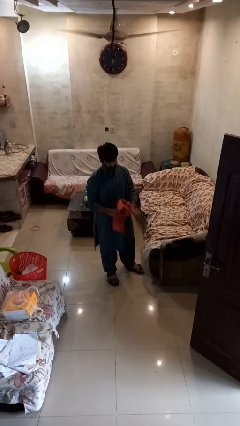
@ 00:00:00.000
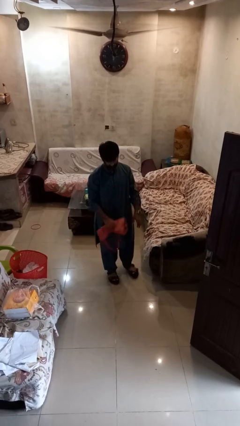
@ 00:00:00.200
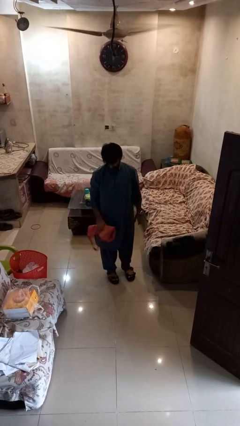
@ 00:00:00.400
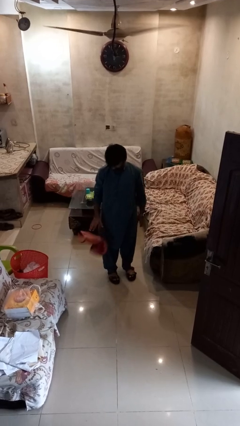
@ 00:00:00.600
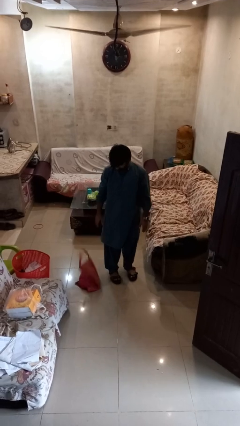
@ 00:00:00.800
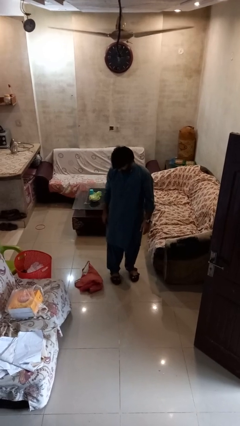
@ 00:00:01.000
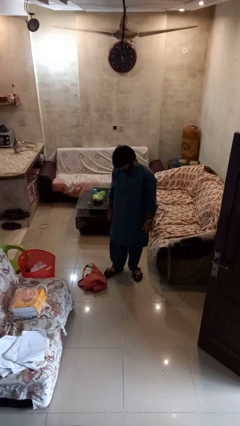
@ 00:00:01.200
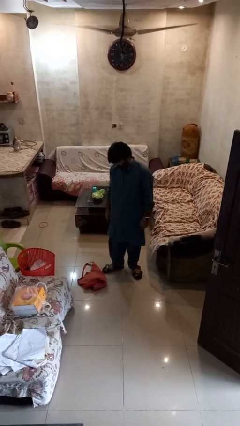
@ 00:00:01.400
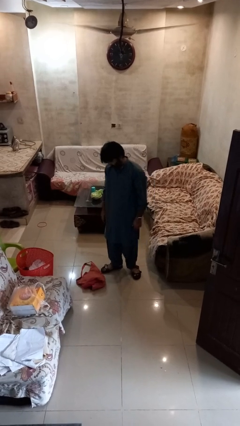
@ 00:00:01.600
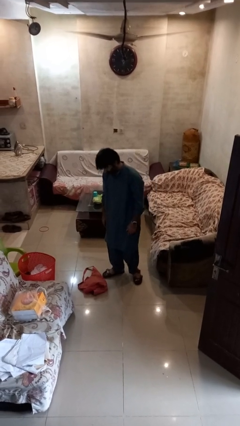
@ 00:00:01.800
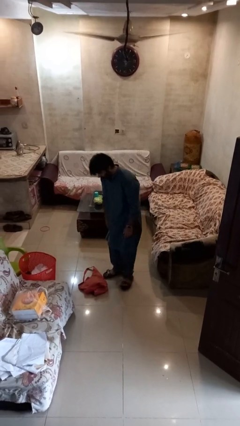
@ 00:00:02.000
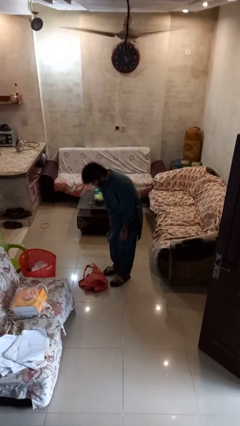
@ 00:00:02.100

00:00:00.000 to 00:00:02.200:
person drops object

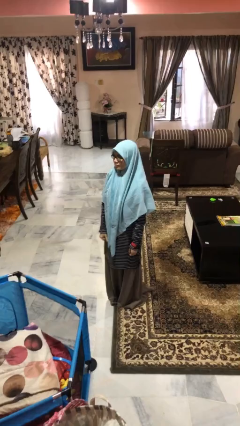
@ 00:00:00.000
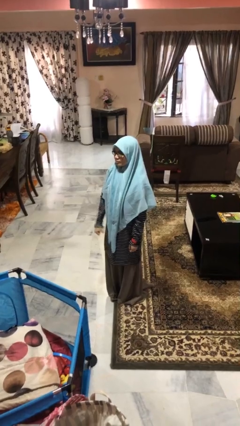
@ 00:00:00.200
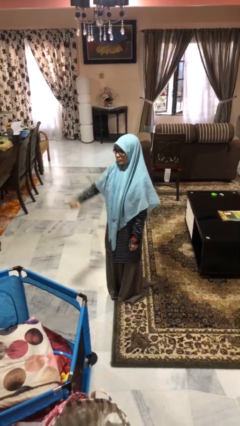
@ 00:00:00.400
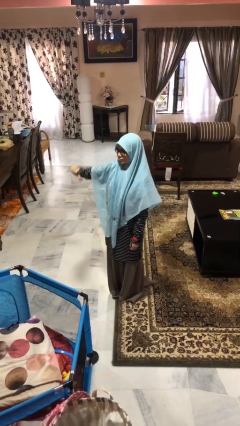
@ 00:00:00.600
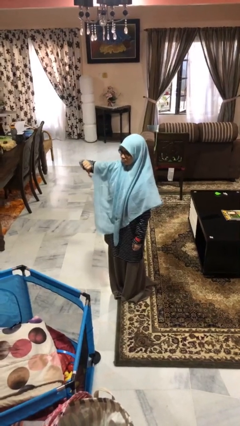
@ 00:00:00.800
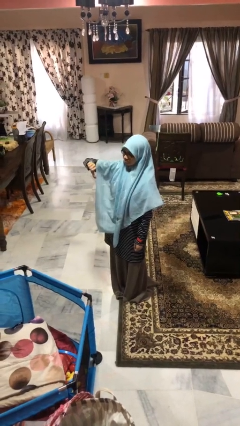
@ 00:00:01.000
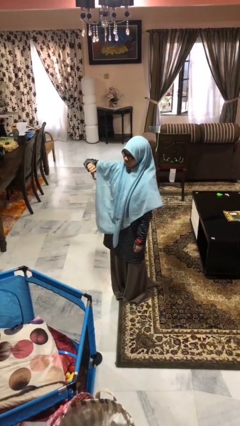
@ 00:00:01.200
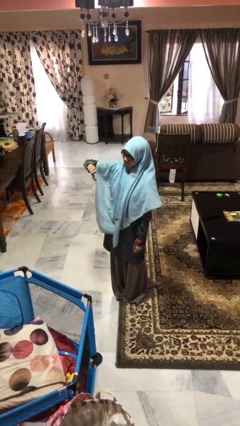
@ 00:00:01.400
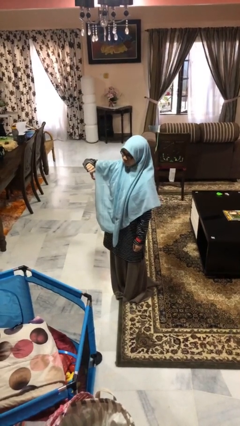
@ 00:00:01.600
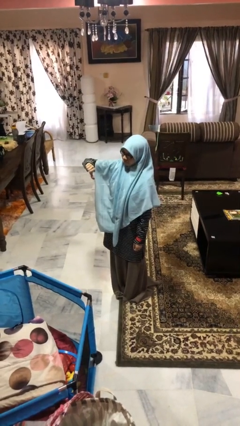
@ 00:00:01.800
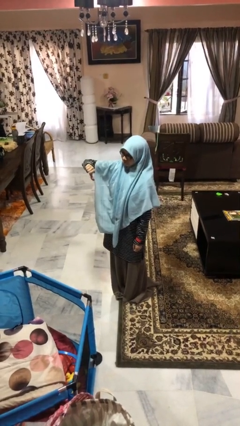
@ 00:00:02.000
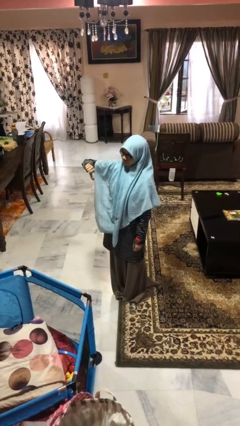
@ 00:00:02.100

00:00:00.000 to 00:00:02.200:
person gestures thumbs down

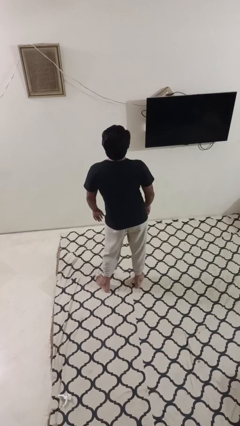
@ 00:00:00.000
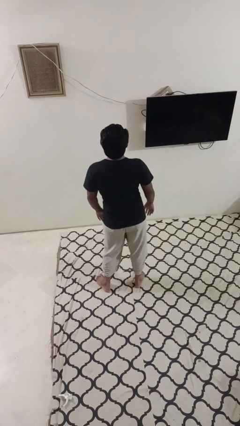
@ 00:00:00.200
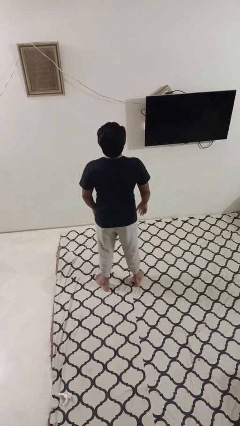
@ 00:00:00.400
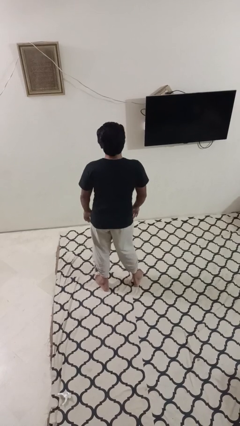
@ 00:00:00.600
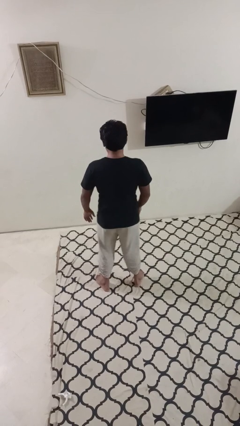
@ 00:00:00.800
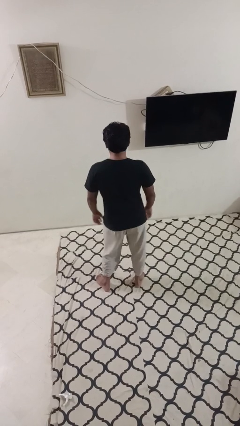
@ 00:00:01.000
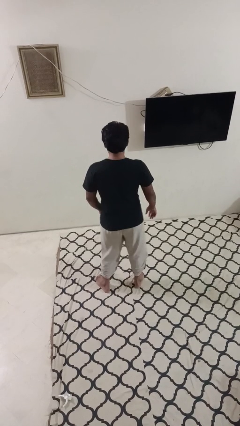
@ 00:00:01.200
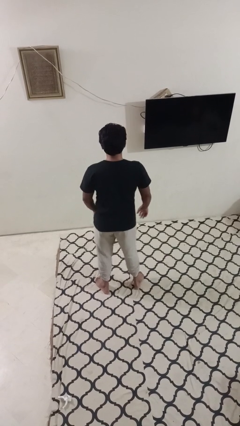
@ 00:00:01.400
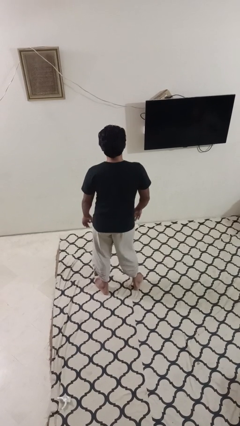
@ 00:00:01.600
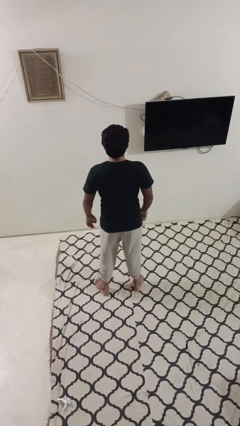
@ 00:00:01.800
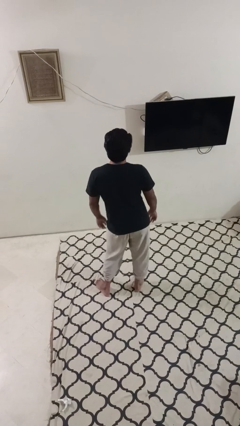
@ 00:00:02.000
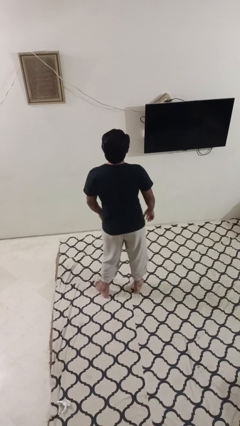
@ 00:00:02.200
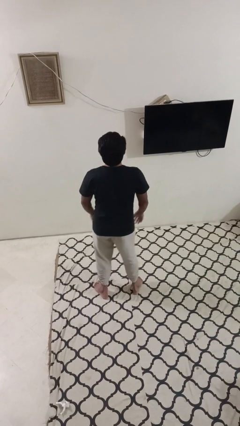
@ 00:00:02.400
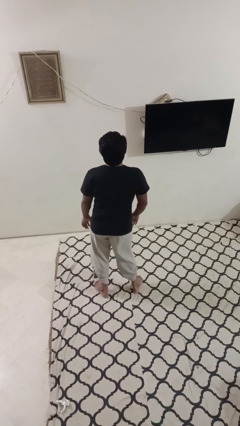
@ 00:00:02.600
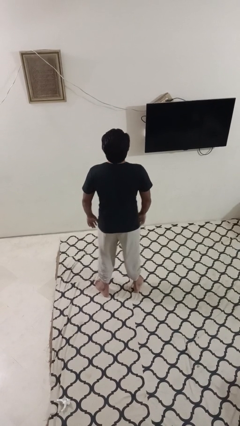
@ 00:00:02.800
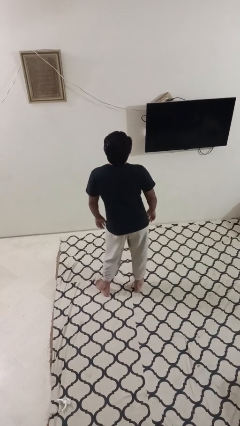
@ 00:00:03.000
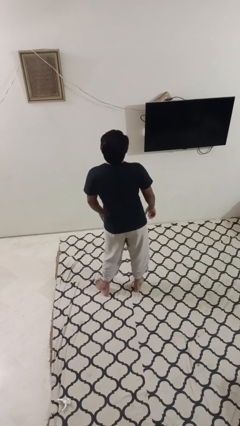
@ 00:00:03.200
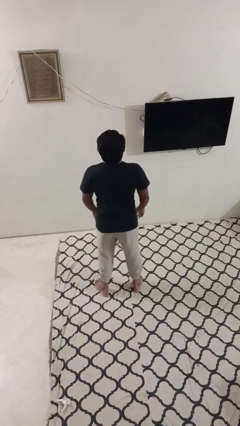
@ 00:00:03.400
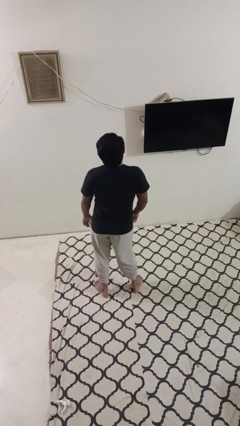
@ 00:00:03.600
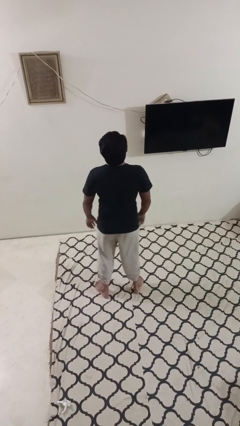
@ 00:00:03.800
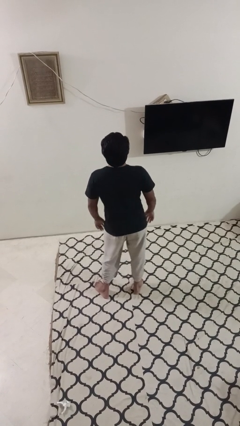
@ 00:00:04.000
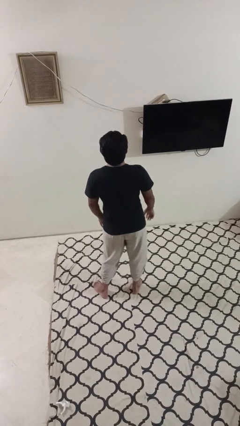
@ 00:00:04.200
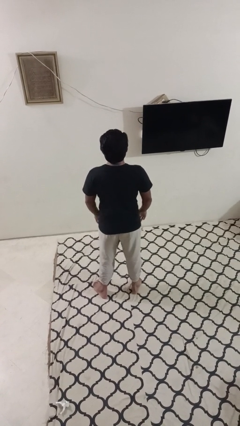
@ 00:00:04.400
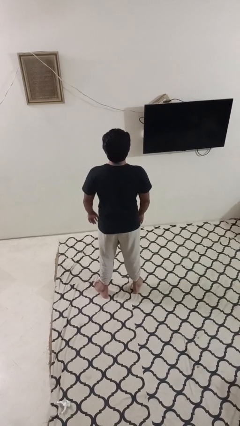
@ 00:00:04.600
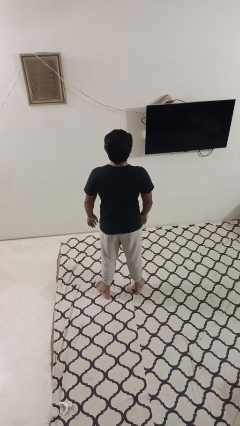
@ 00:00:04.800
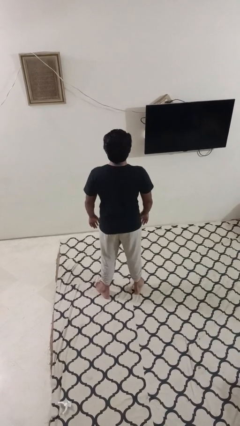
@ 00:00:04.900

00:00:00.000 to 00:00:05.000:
person wiggles hips

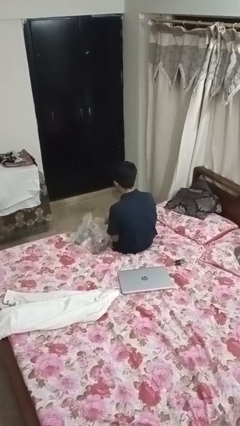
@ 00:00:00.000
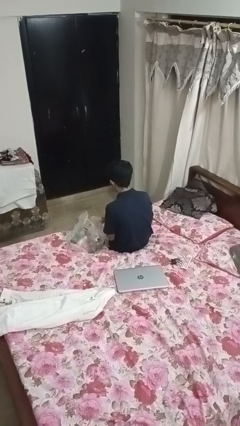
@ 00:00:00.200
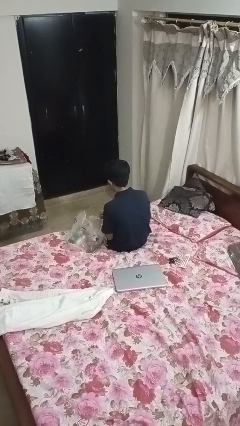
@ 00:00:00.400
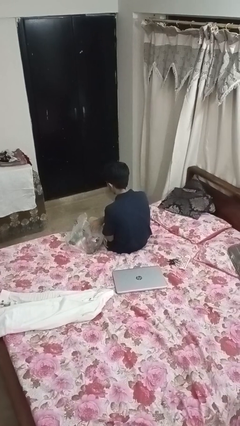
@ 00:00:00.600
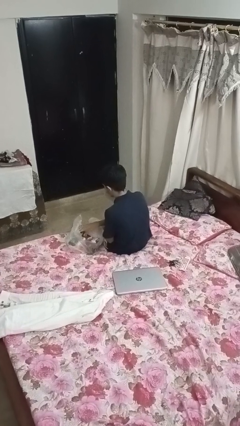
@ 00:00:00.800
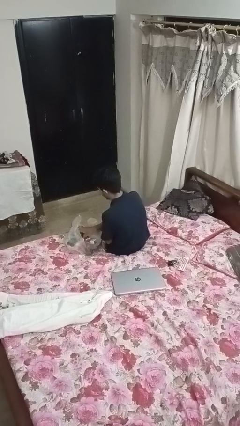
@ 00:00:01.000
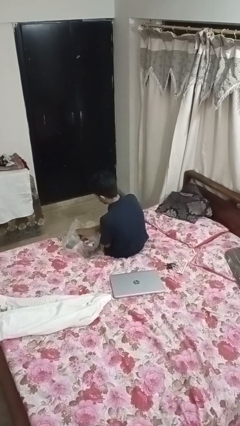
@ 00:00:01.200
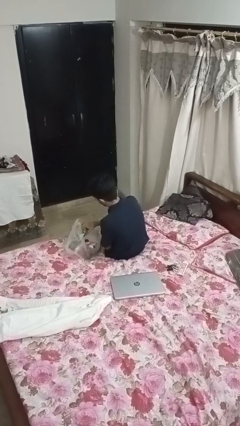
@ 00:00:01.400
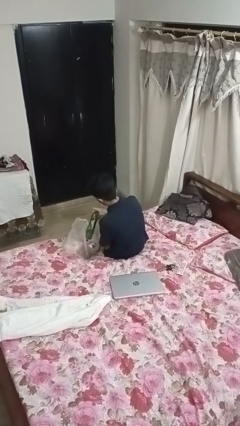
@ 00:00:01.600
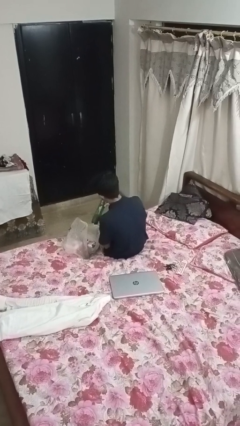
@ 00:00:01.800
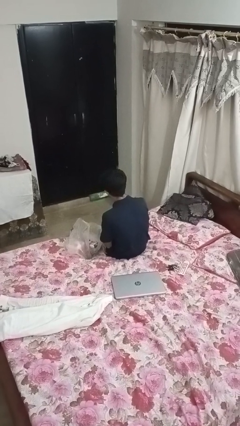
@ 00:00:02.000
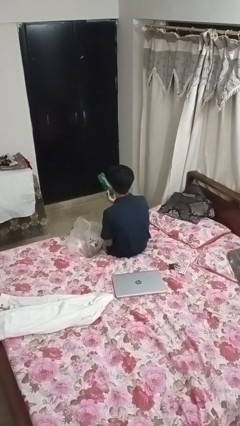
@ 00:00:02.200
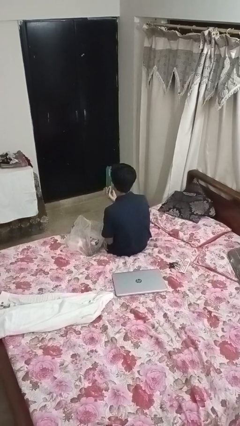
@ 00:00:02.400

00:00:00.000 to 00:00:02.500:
person takes object from bag

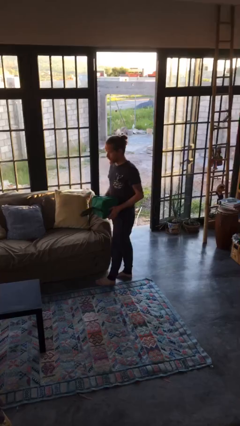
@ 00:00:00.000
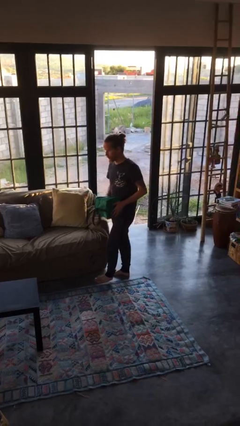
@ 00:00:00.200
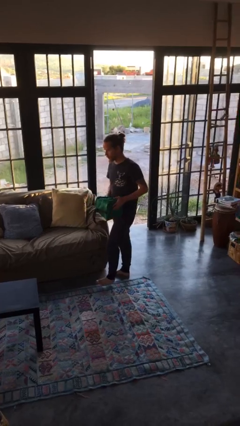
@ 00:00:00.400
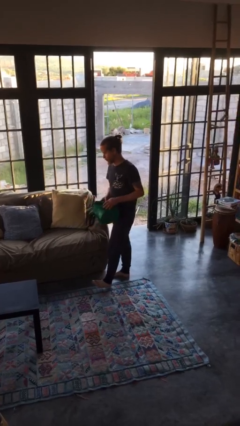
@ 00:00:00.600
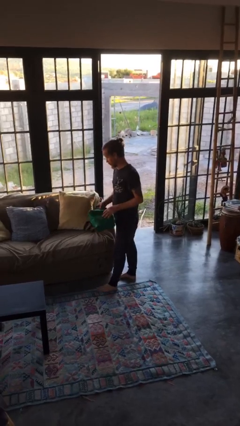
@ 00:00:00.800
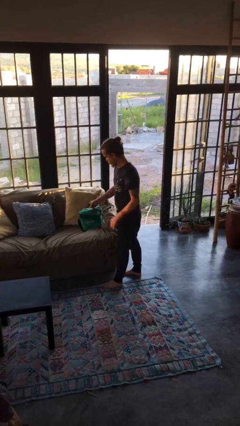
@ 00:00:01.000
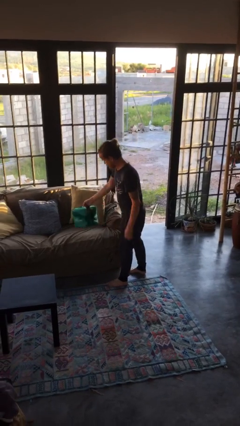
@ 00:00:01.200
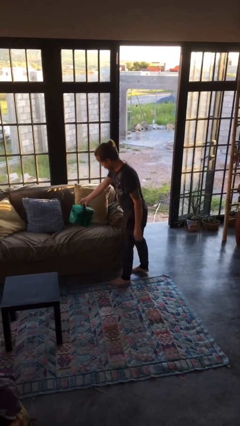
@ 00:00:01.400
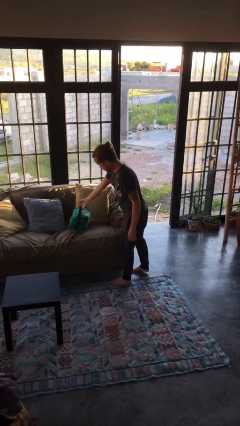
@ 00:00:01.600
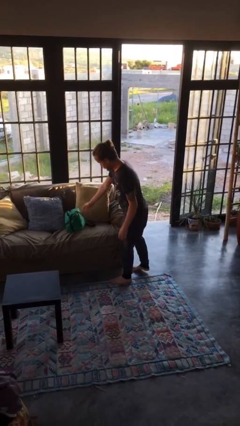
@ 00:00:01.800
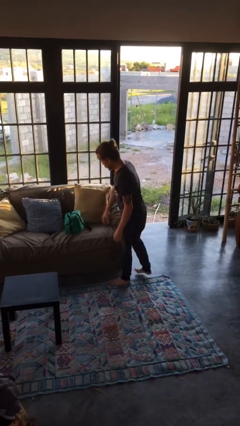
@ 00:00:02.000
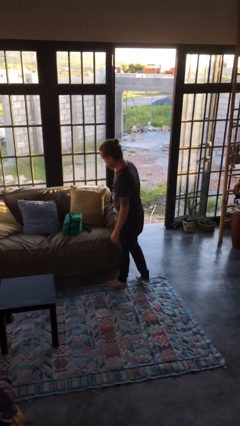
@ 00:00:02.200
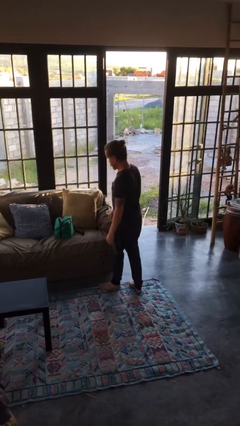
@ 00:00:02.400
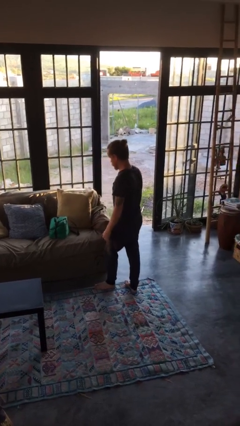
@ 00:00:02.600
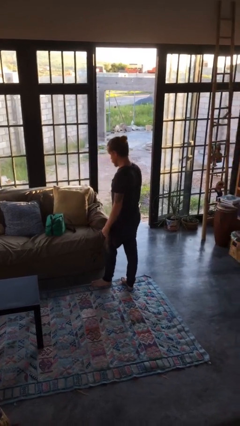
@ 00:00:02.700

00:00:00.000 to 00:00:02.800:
person puts down object on couch

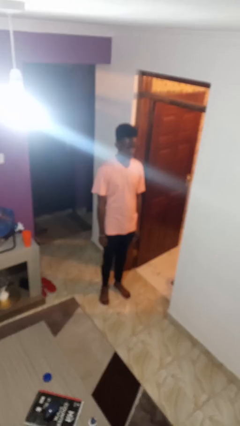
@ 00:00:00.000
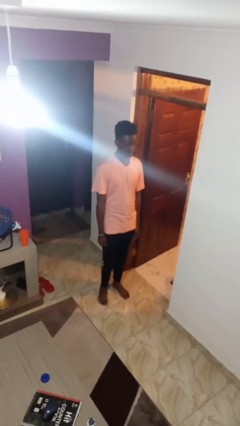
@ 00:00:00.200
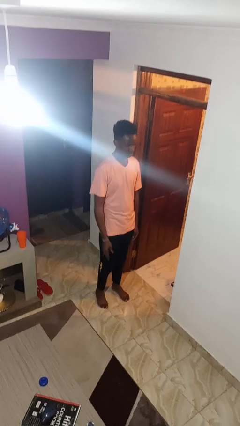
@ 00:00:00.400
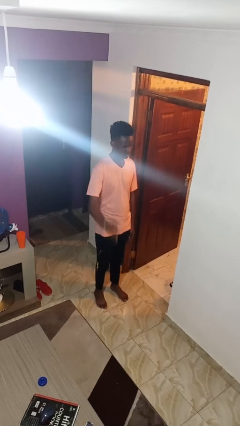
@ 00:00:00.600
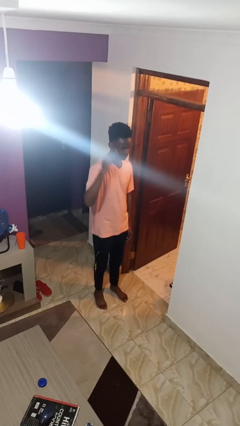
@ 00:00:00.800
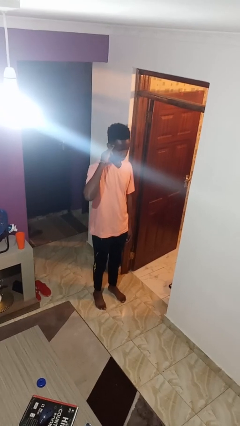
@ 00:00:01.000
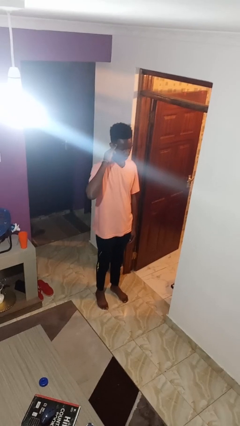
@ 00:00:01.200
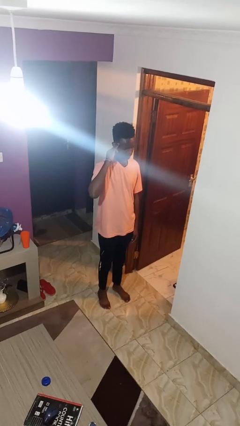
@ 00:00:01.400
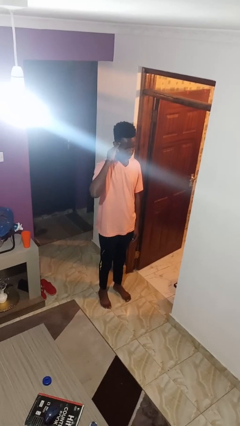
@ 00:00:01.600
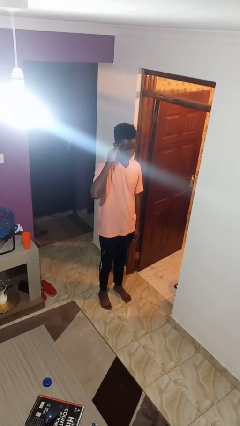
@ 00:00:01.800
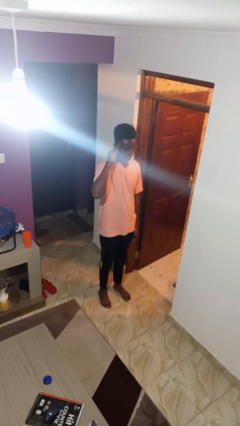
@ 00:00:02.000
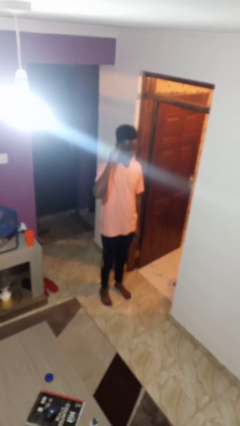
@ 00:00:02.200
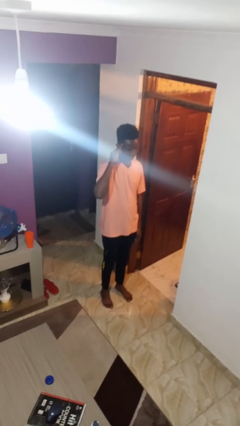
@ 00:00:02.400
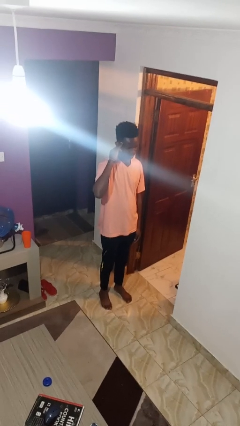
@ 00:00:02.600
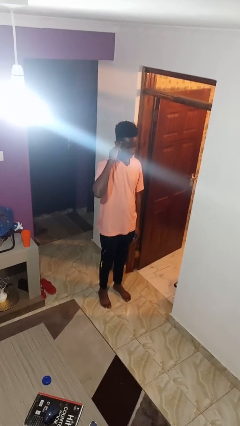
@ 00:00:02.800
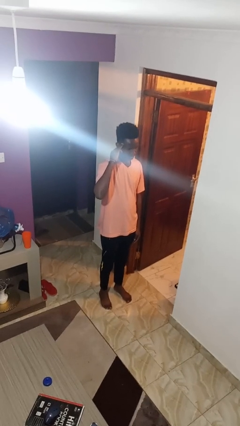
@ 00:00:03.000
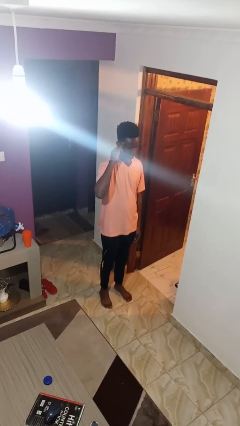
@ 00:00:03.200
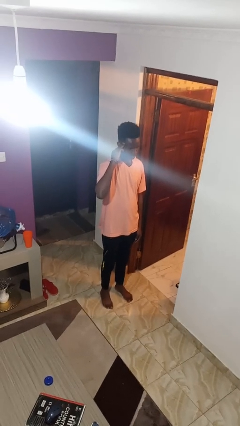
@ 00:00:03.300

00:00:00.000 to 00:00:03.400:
person salutes
